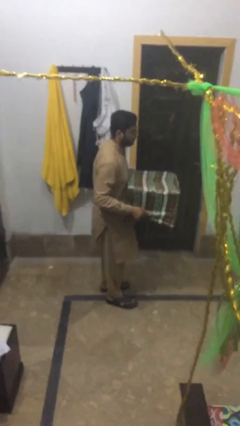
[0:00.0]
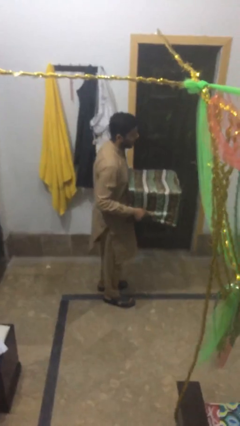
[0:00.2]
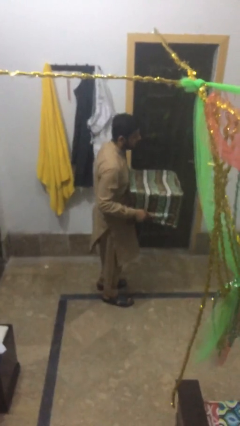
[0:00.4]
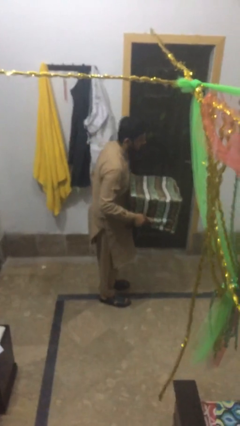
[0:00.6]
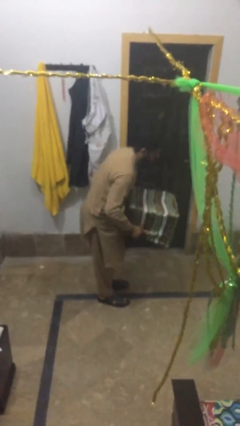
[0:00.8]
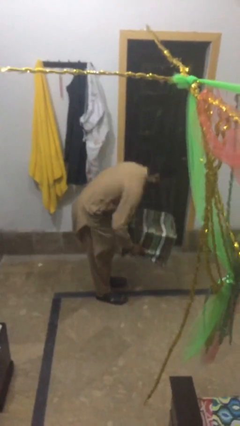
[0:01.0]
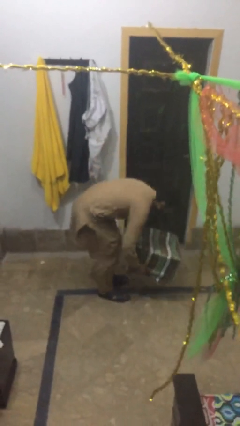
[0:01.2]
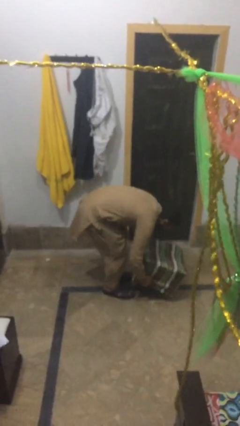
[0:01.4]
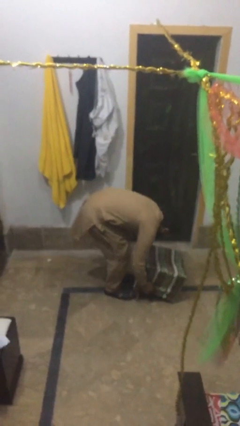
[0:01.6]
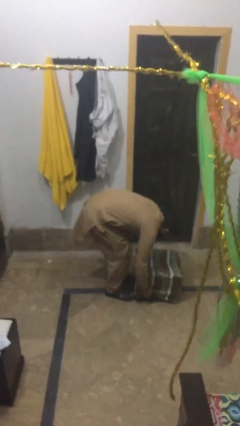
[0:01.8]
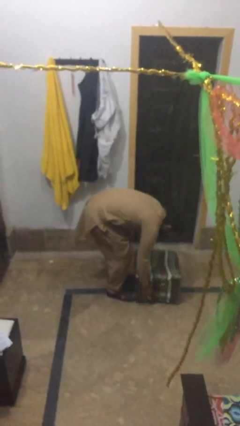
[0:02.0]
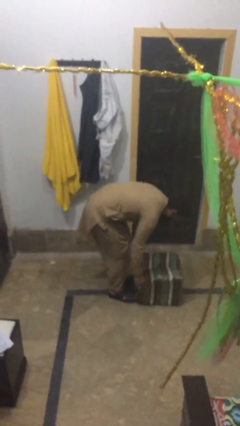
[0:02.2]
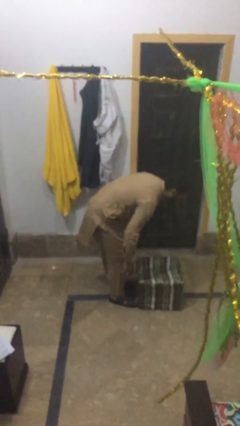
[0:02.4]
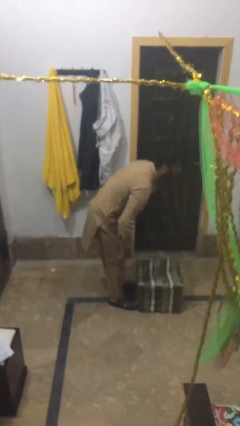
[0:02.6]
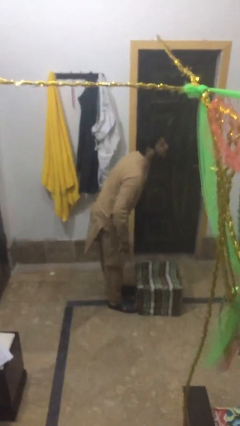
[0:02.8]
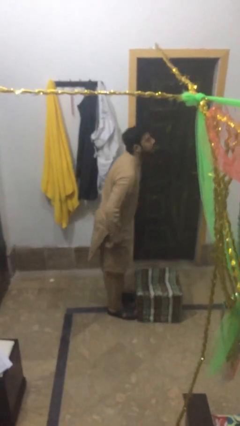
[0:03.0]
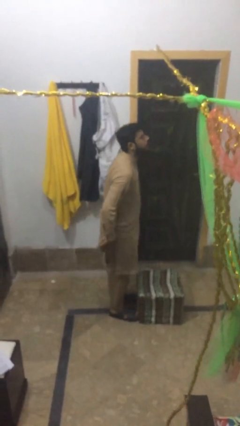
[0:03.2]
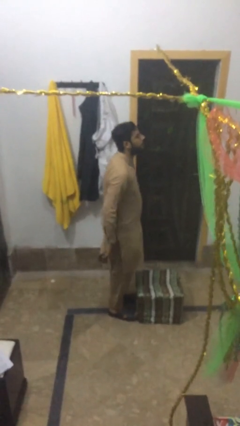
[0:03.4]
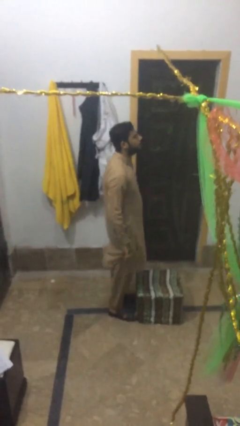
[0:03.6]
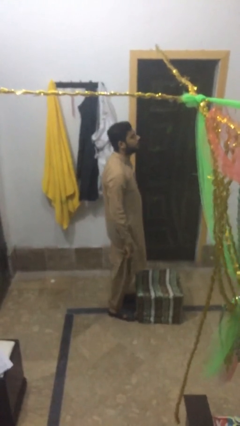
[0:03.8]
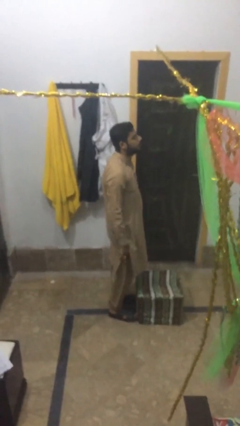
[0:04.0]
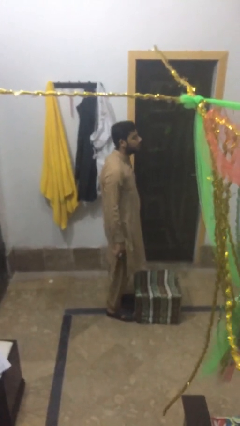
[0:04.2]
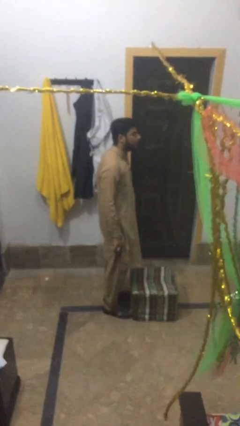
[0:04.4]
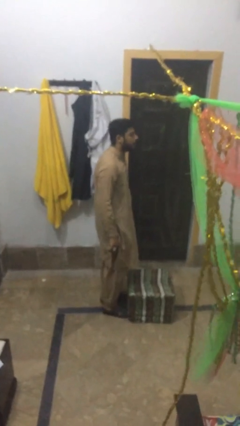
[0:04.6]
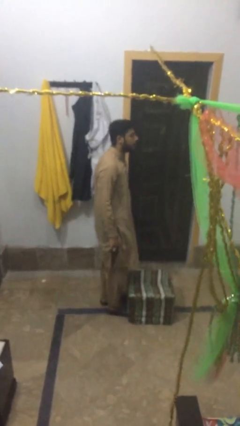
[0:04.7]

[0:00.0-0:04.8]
person puts down object on floor

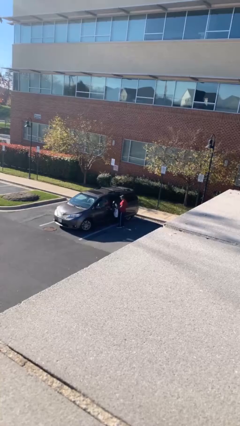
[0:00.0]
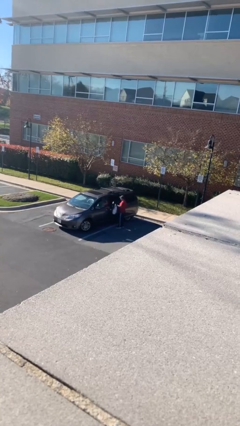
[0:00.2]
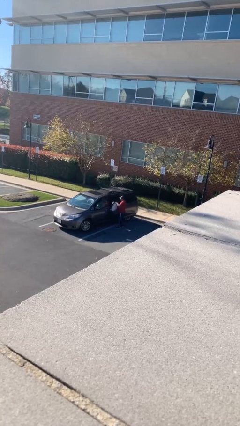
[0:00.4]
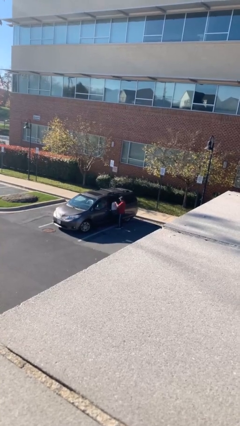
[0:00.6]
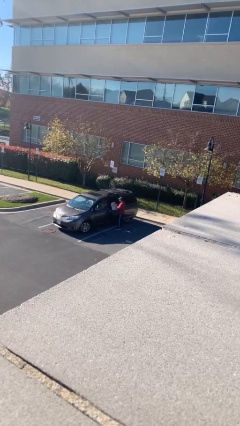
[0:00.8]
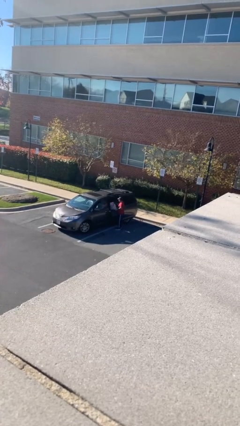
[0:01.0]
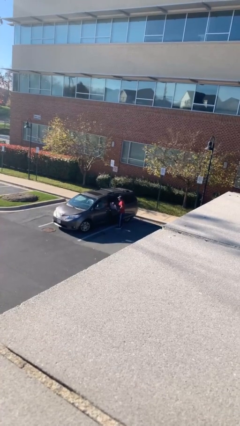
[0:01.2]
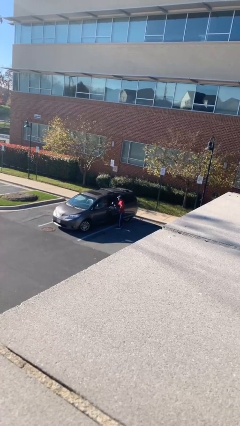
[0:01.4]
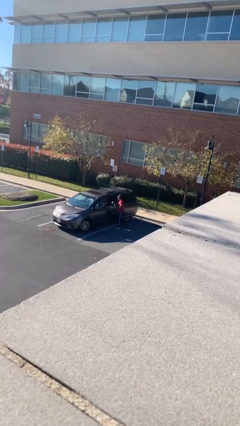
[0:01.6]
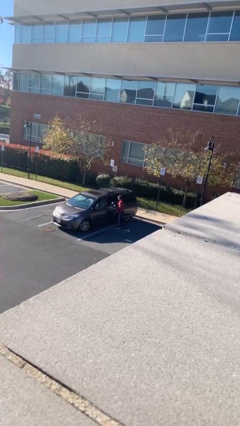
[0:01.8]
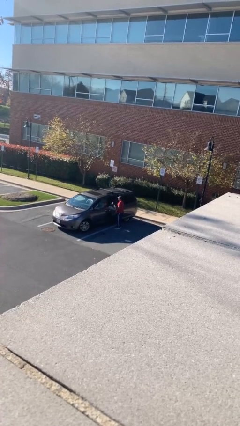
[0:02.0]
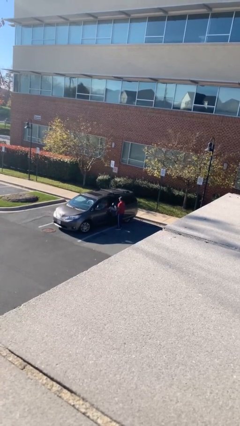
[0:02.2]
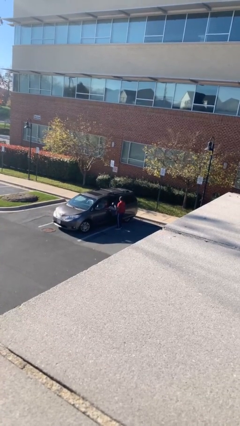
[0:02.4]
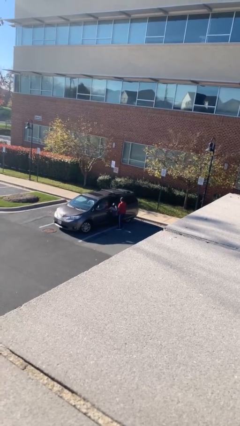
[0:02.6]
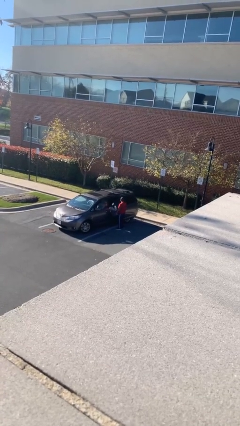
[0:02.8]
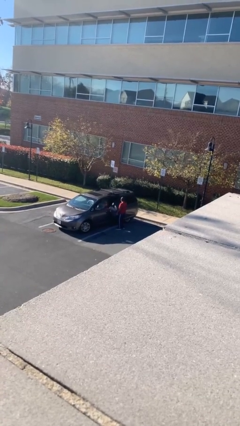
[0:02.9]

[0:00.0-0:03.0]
person loads car

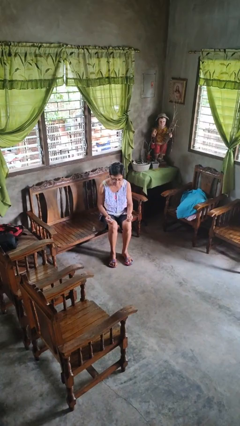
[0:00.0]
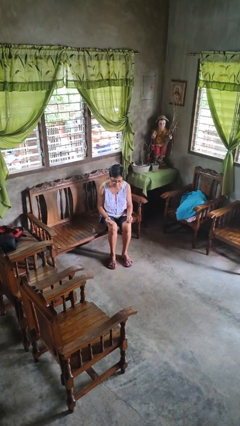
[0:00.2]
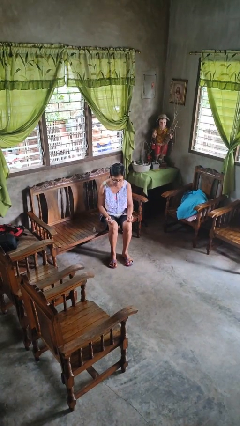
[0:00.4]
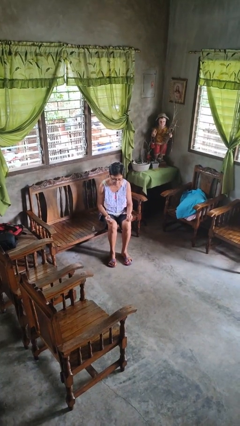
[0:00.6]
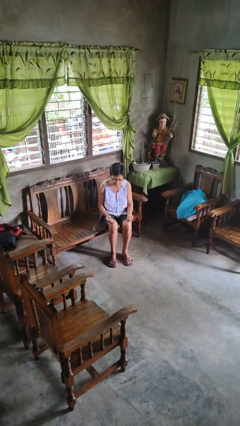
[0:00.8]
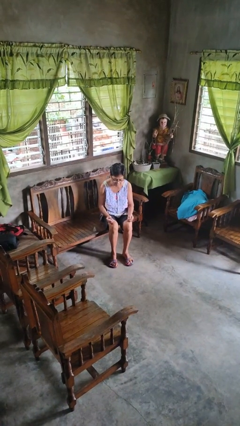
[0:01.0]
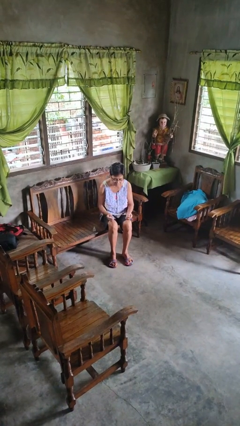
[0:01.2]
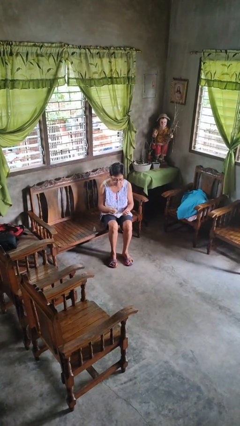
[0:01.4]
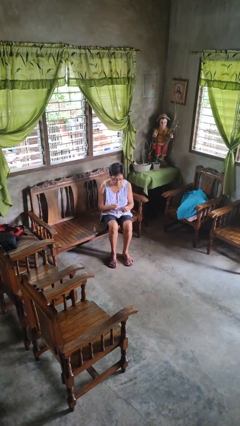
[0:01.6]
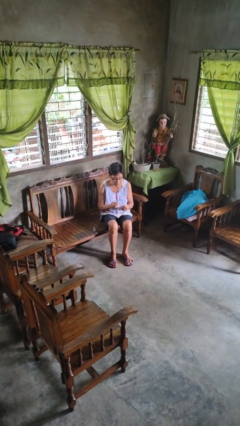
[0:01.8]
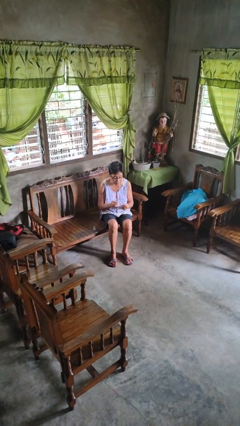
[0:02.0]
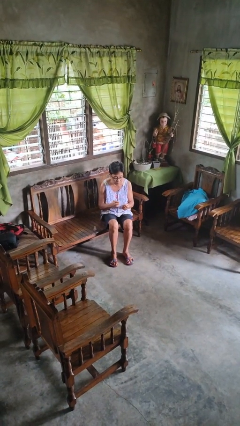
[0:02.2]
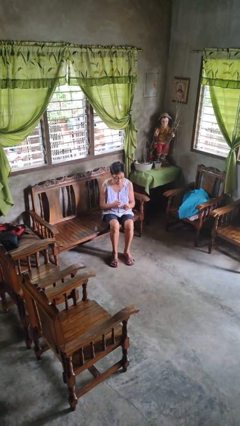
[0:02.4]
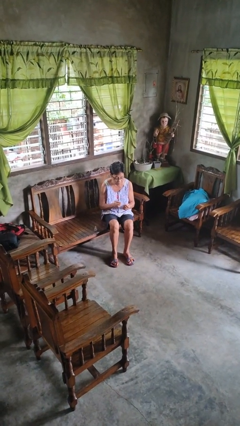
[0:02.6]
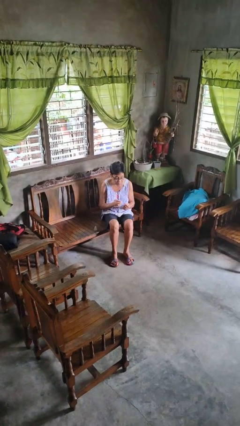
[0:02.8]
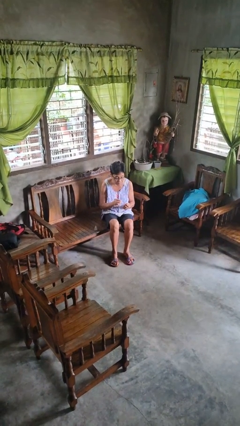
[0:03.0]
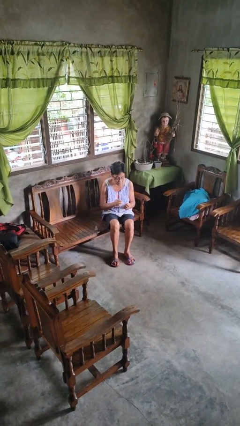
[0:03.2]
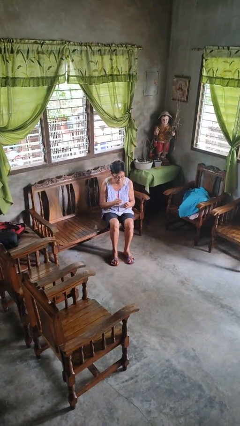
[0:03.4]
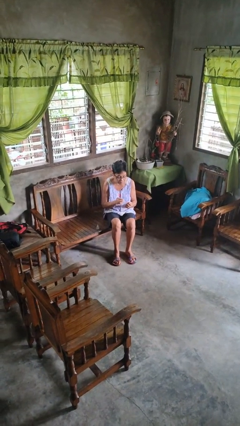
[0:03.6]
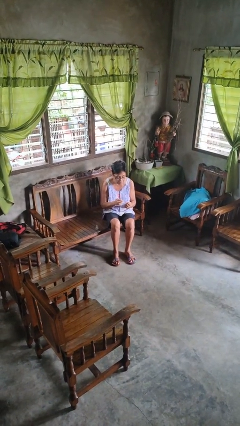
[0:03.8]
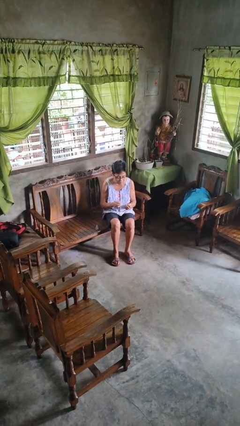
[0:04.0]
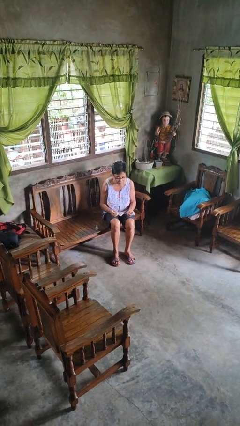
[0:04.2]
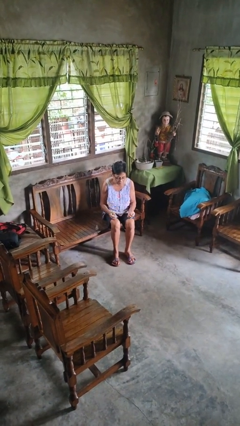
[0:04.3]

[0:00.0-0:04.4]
person paints fingernails

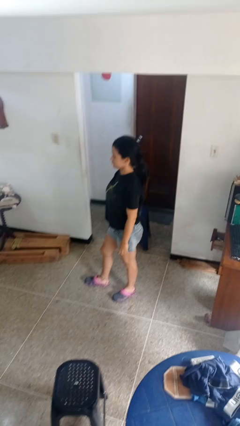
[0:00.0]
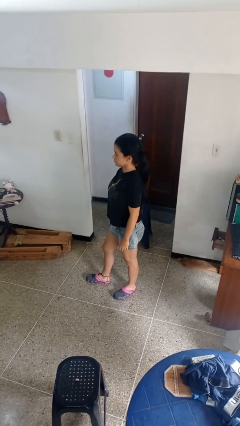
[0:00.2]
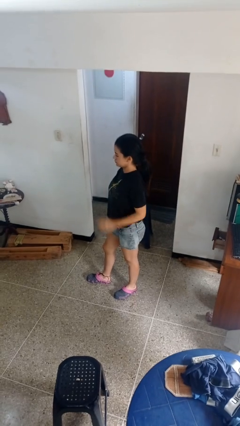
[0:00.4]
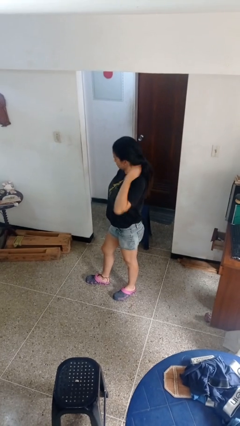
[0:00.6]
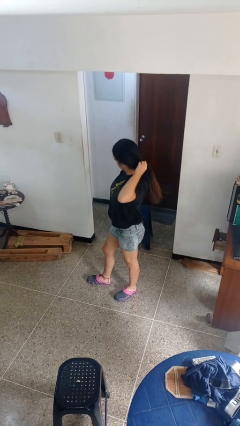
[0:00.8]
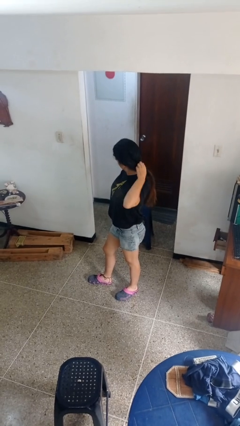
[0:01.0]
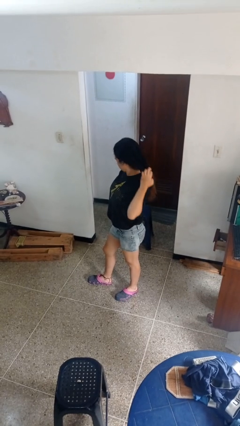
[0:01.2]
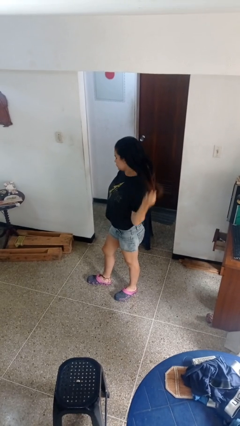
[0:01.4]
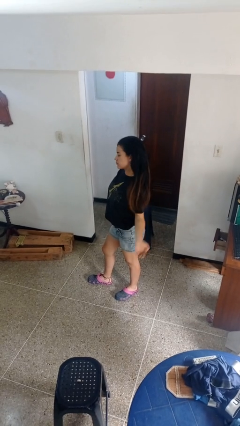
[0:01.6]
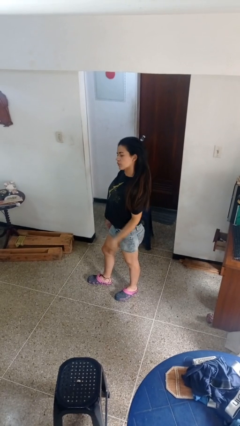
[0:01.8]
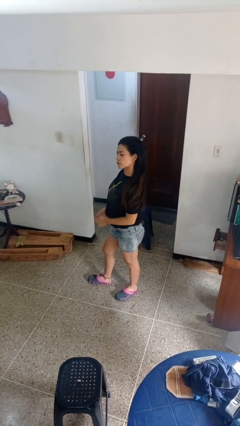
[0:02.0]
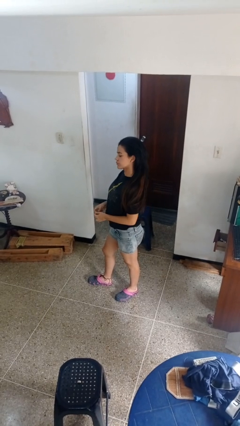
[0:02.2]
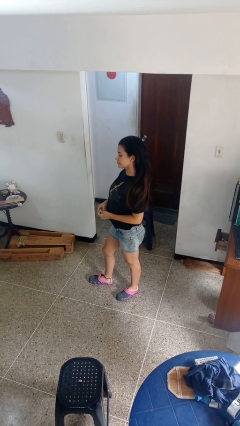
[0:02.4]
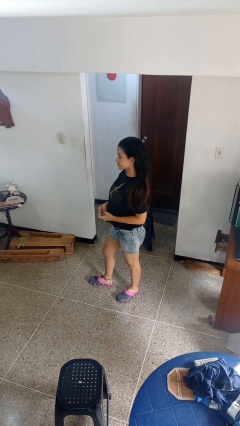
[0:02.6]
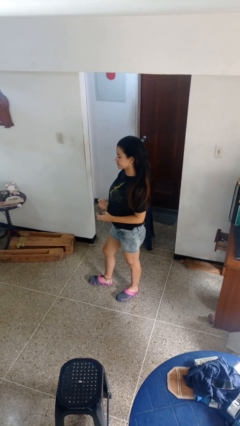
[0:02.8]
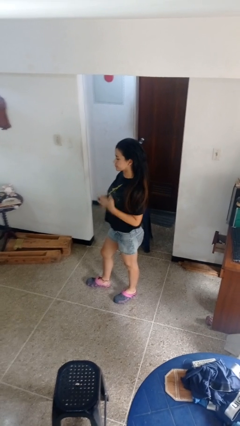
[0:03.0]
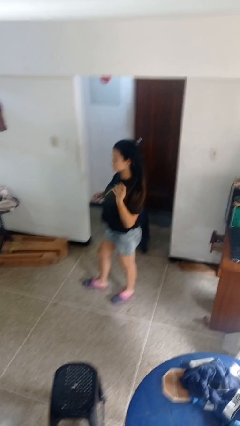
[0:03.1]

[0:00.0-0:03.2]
person takes off hairtie

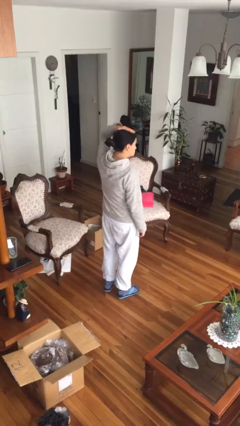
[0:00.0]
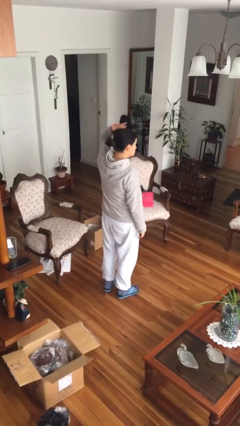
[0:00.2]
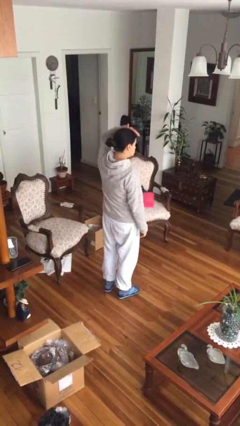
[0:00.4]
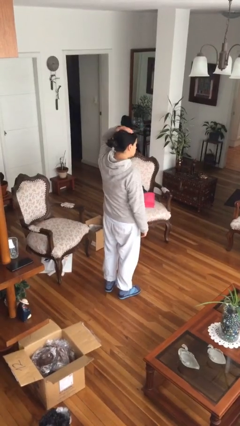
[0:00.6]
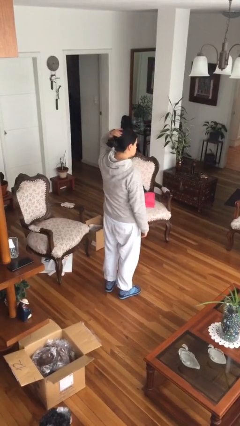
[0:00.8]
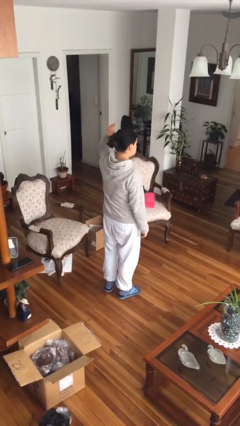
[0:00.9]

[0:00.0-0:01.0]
person pats head

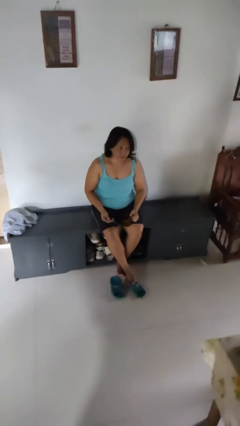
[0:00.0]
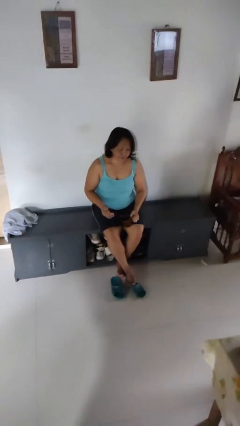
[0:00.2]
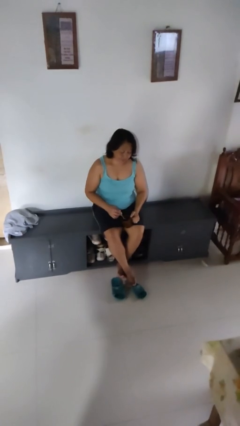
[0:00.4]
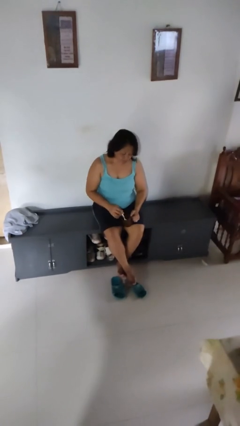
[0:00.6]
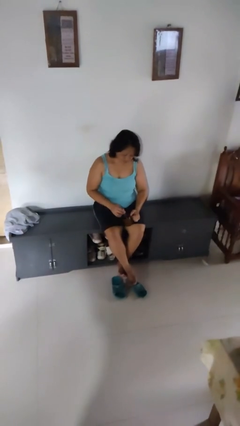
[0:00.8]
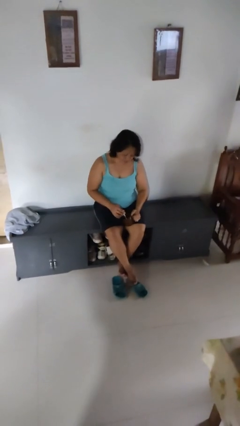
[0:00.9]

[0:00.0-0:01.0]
person stirs mug

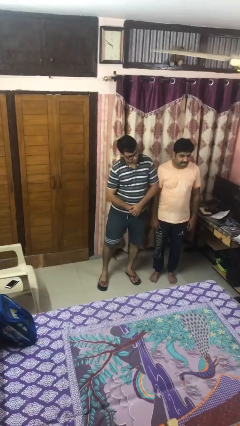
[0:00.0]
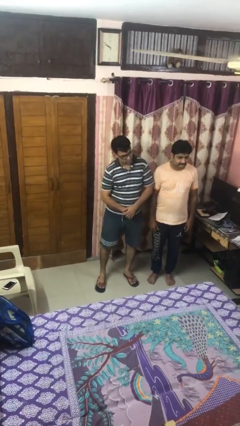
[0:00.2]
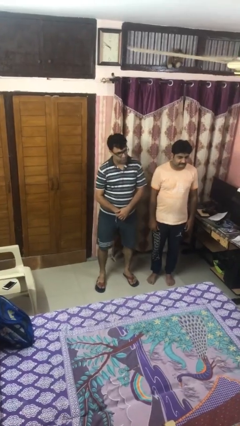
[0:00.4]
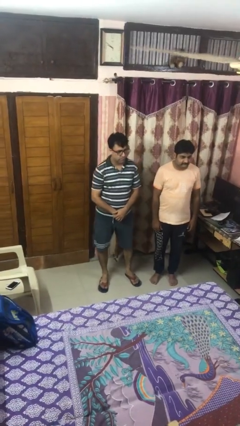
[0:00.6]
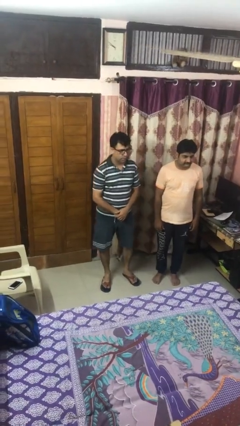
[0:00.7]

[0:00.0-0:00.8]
person nudges person with elbow
